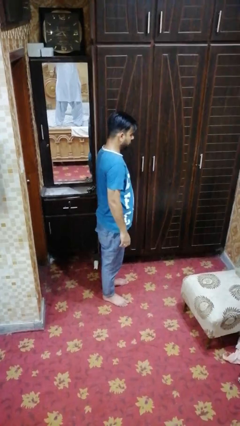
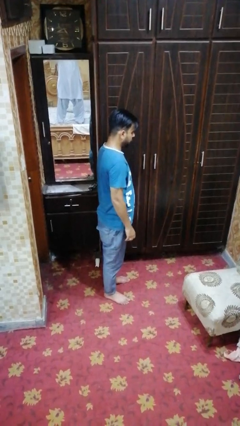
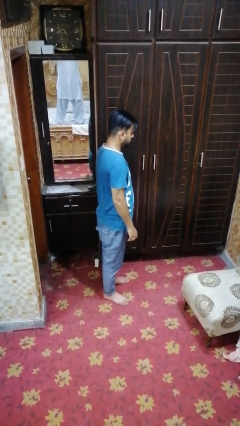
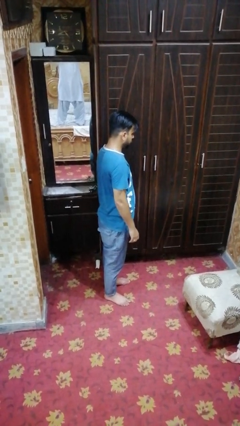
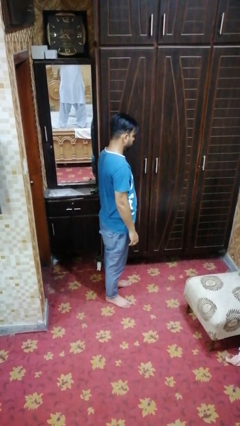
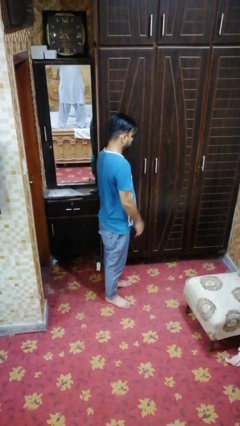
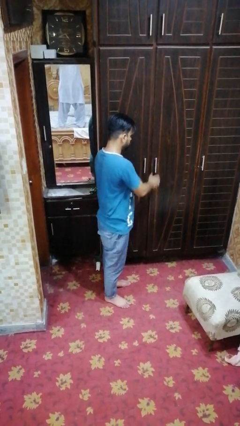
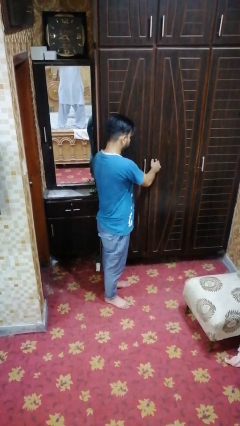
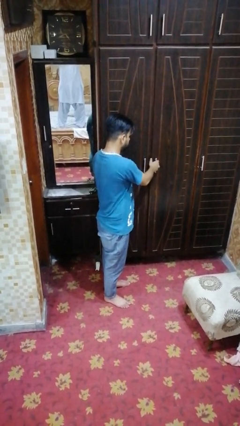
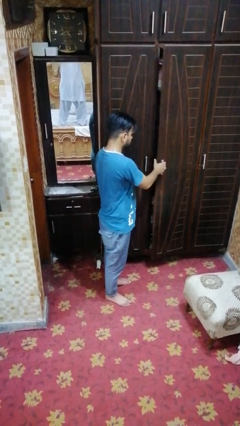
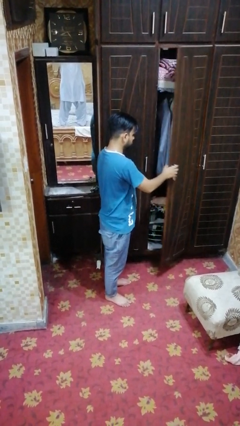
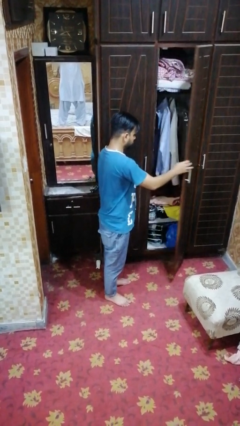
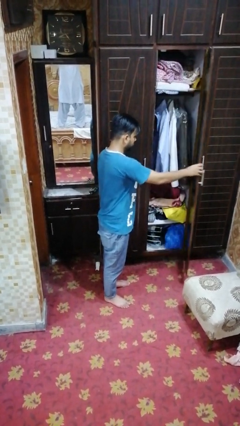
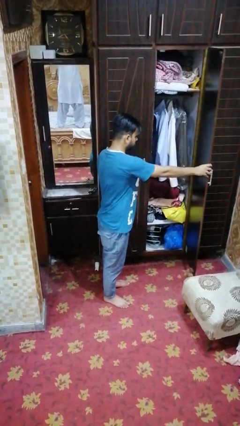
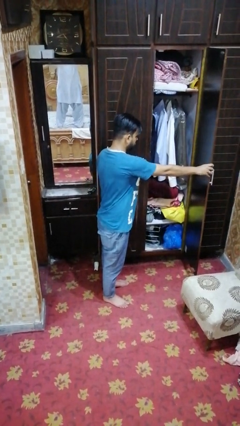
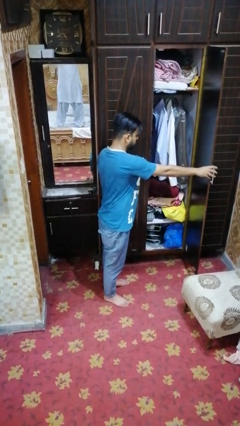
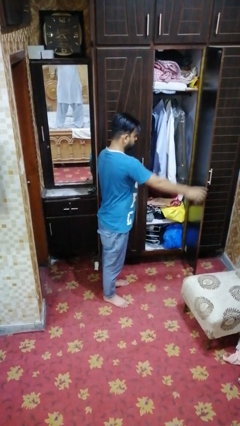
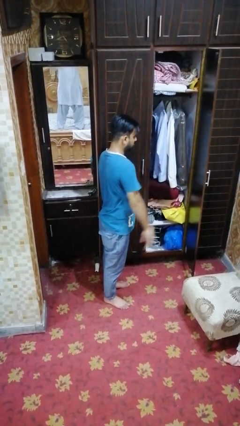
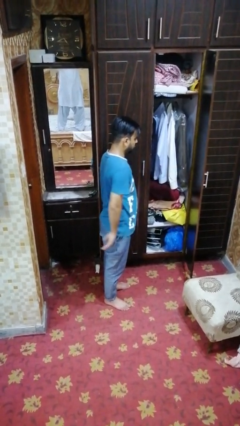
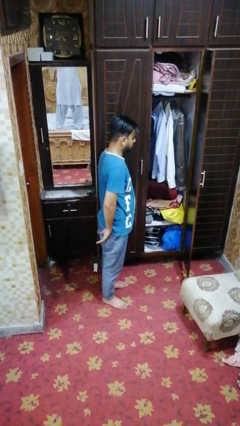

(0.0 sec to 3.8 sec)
person opens closet door

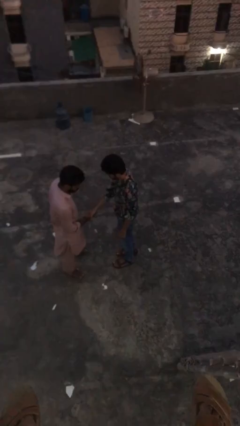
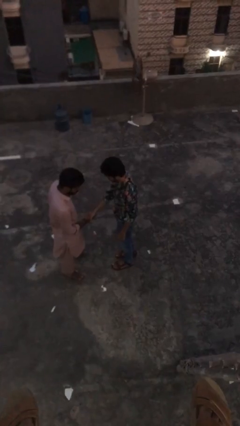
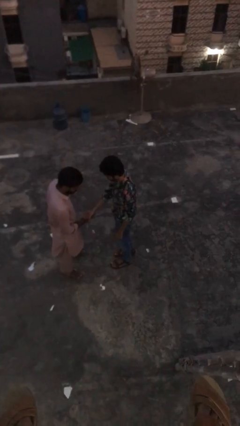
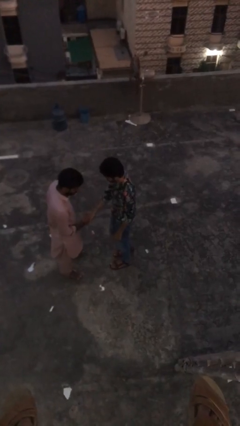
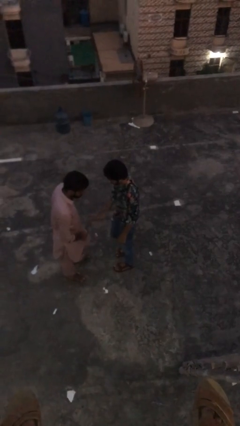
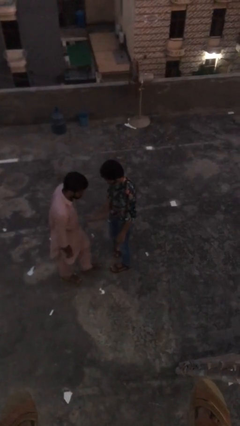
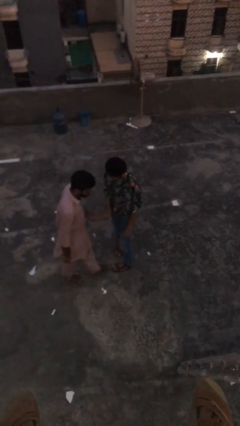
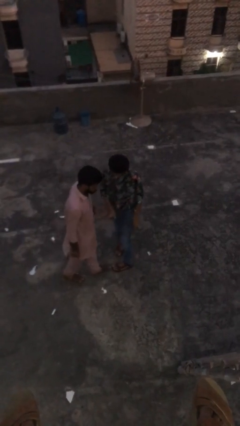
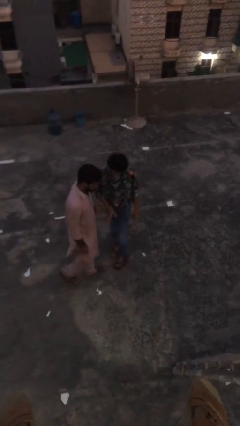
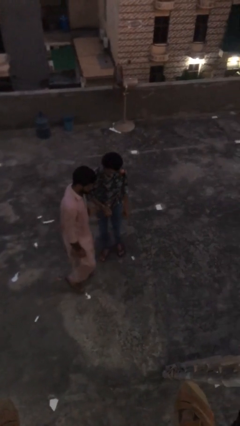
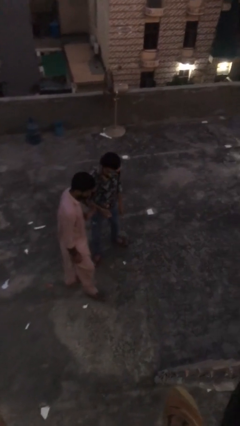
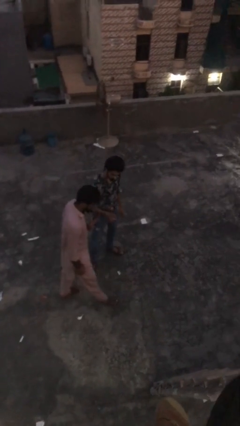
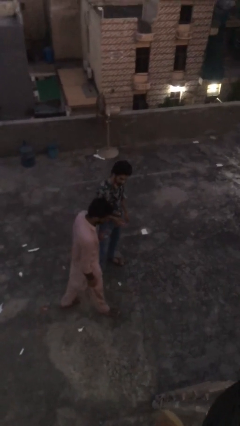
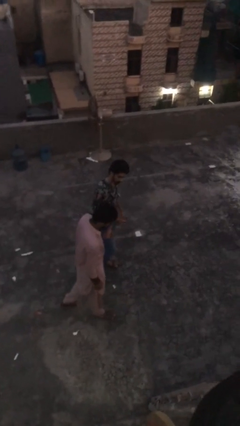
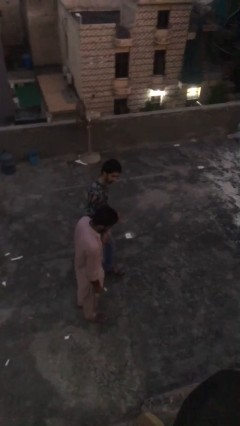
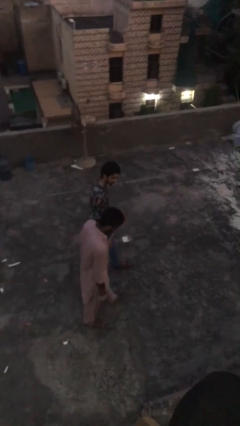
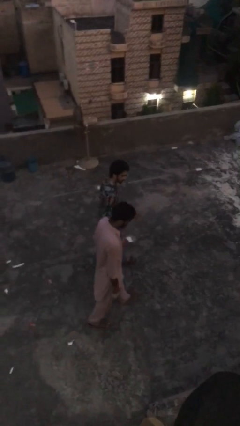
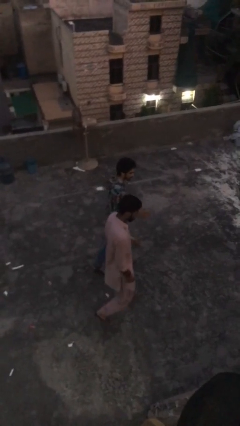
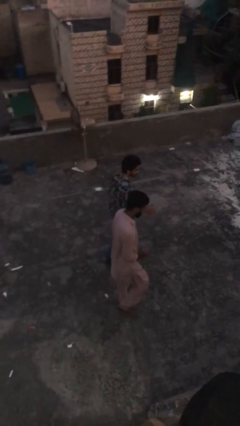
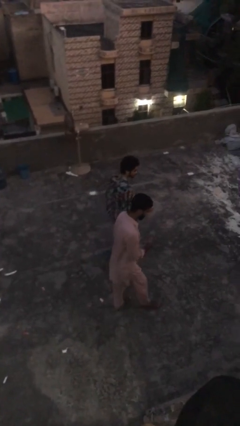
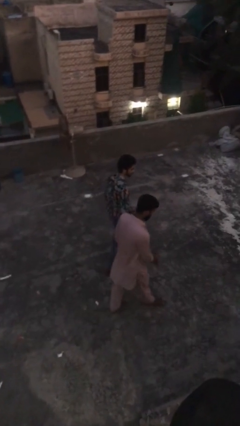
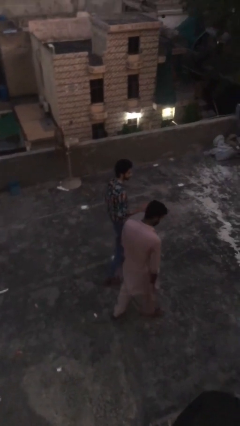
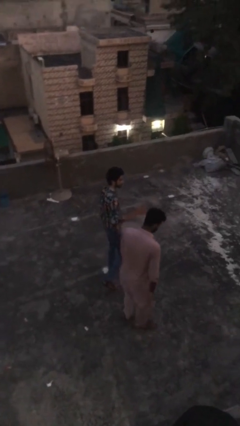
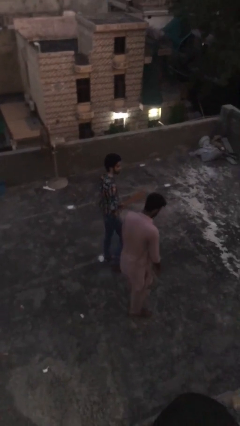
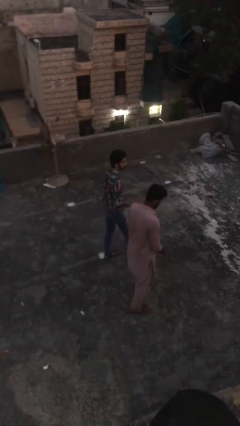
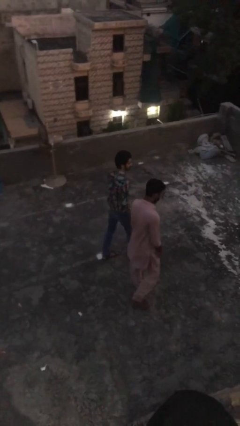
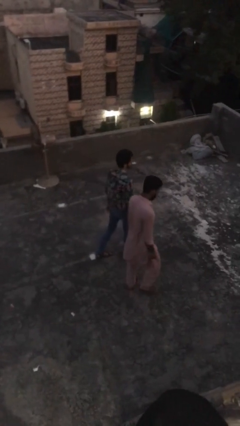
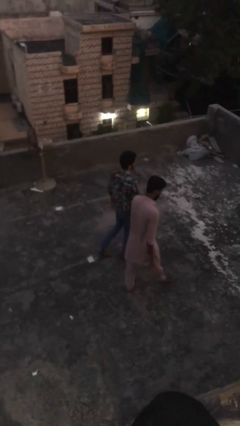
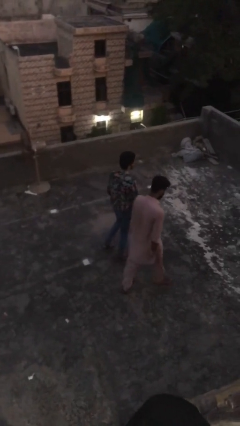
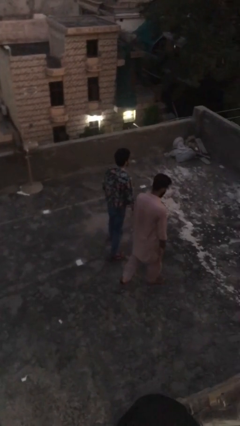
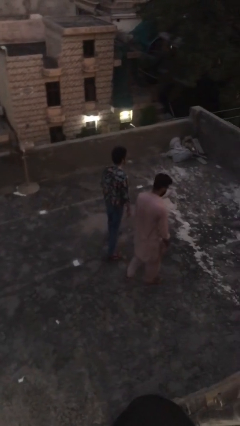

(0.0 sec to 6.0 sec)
person talks to person

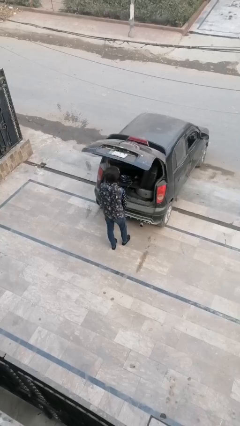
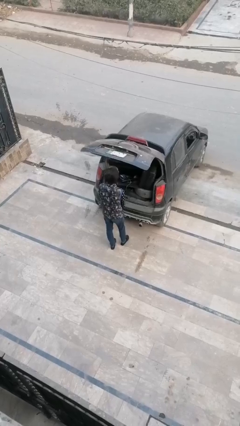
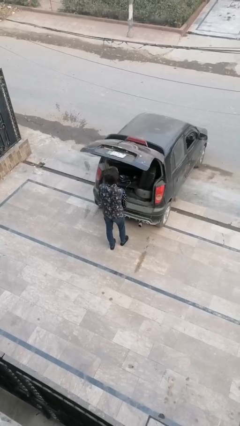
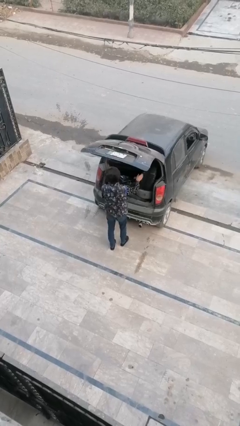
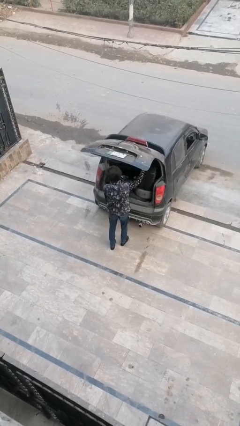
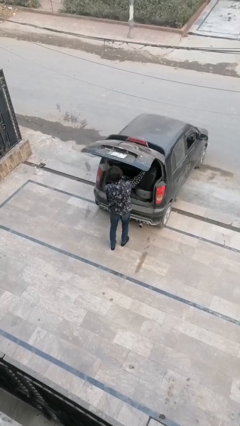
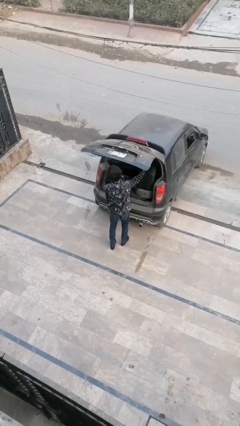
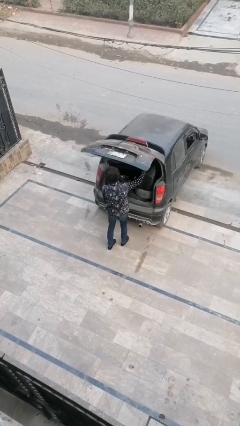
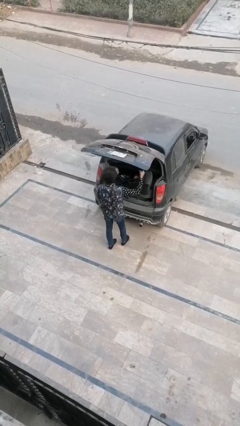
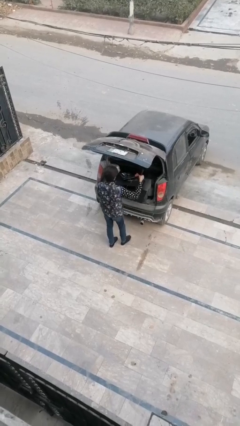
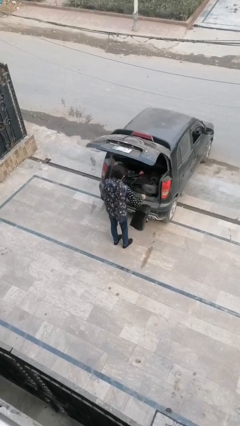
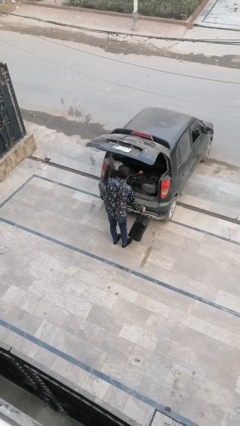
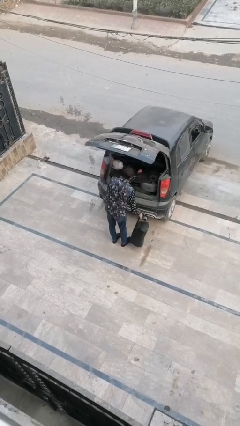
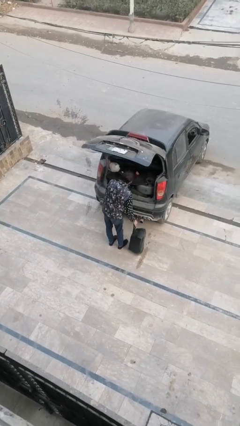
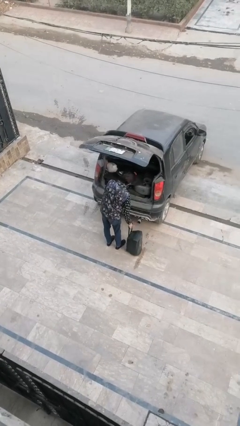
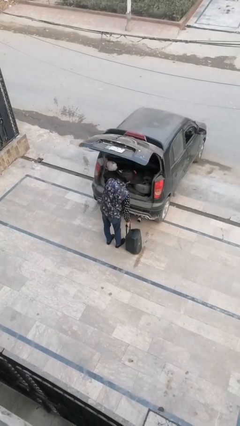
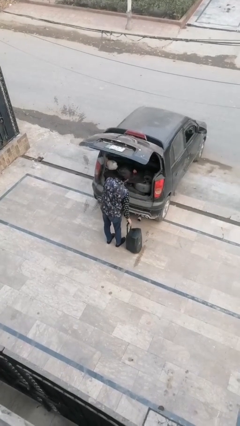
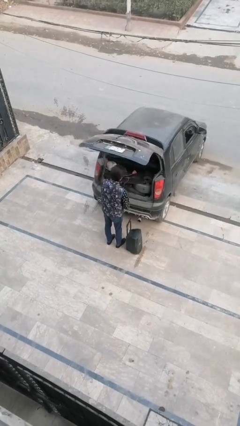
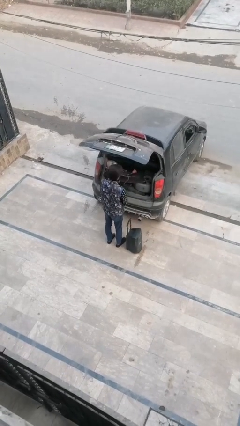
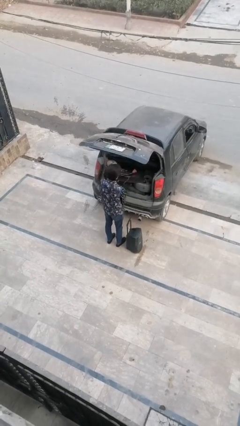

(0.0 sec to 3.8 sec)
person unloads car

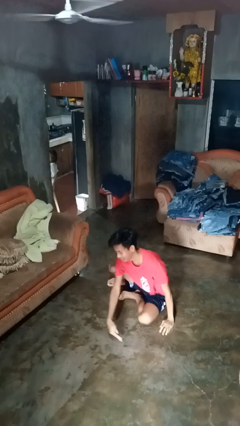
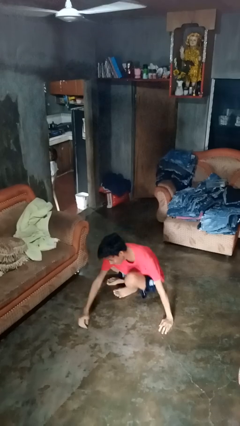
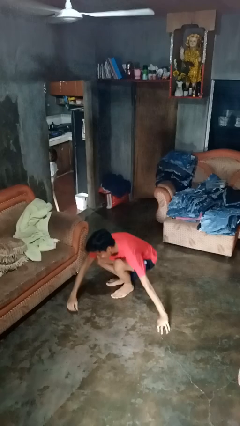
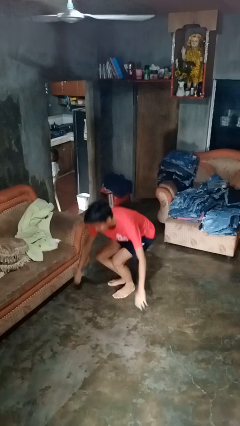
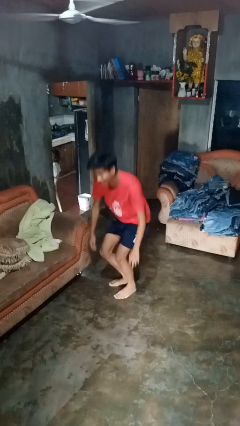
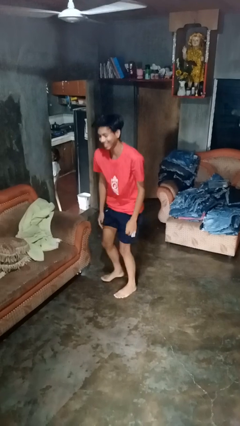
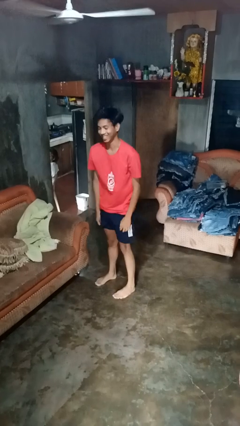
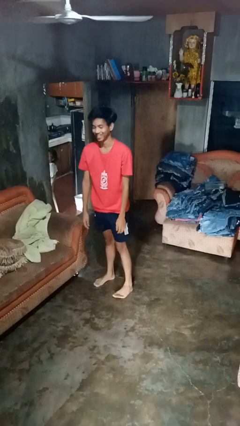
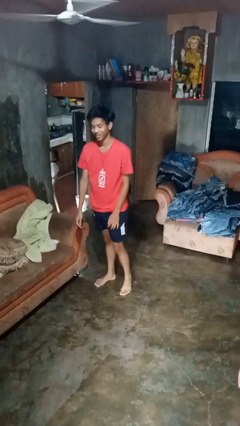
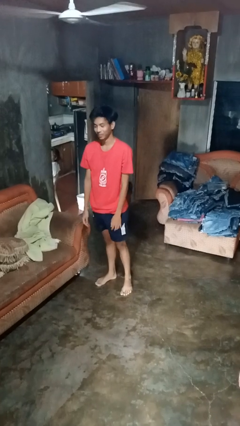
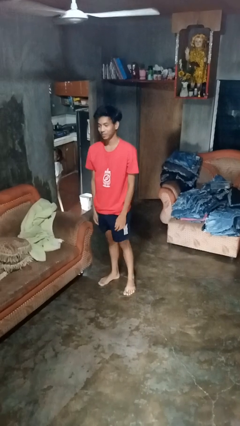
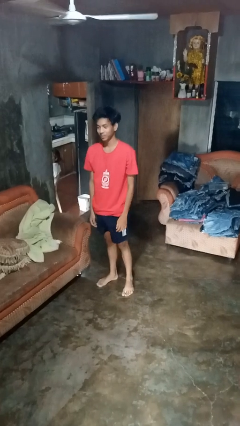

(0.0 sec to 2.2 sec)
person stands up from floor

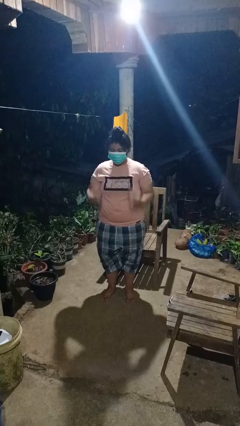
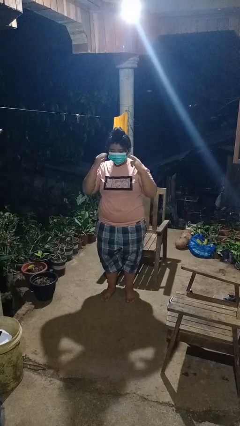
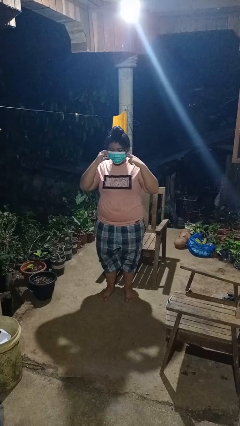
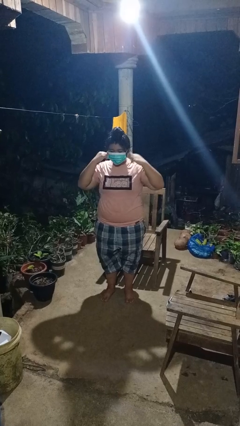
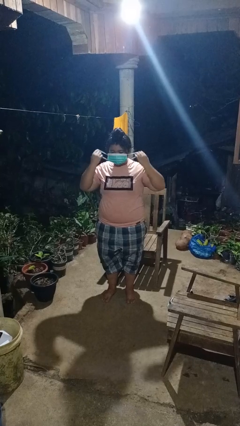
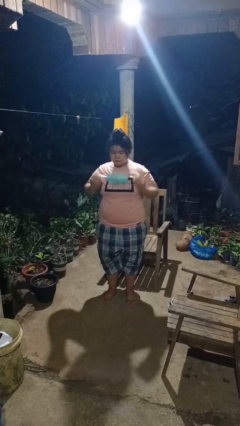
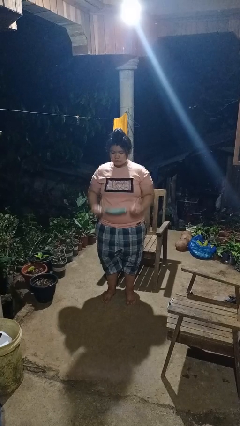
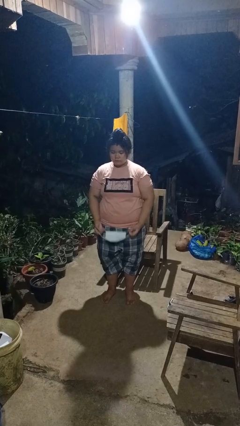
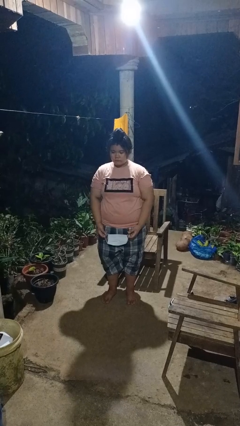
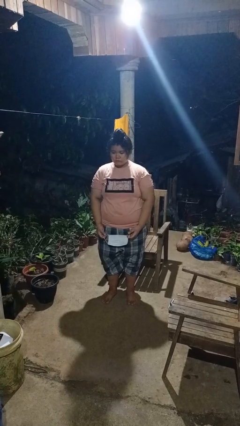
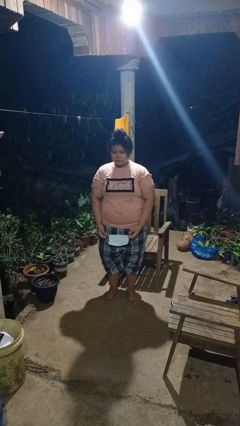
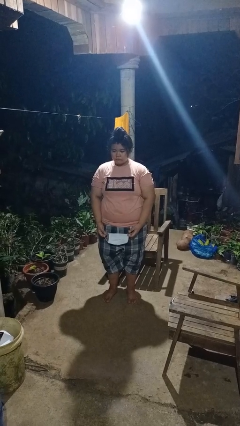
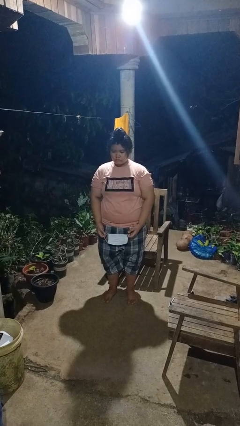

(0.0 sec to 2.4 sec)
person takes off facemask
